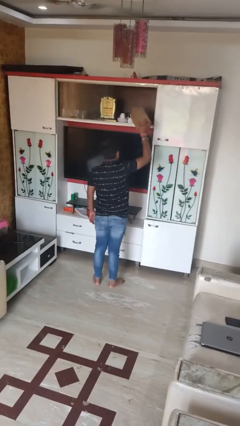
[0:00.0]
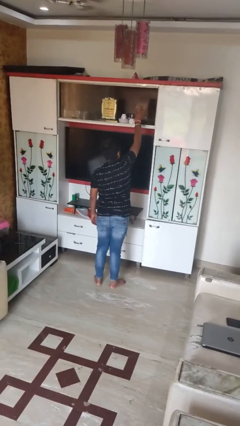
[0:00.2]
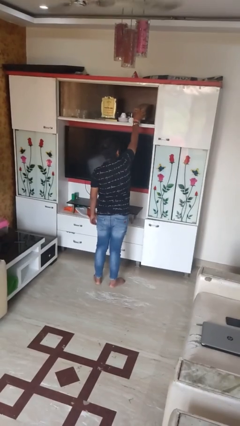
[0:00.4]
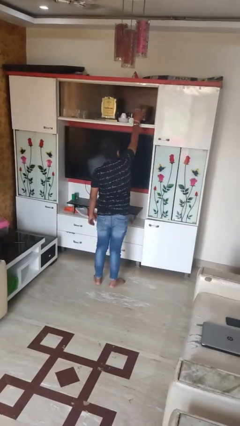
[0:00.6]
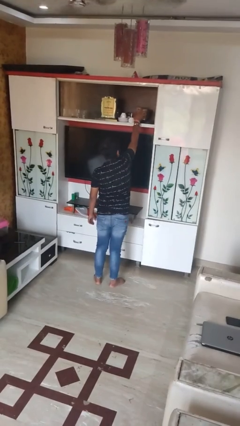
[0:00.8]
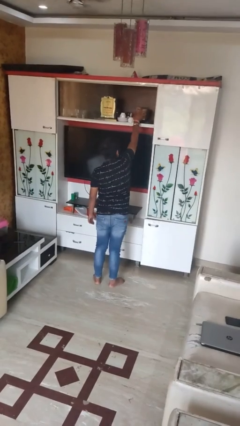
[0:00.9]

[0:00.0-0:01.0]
person puts down object on shelf

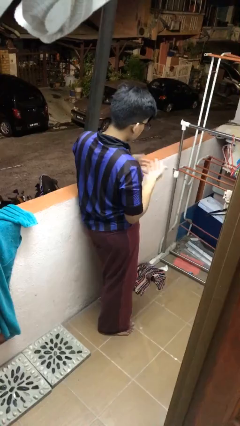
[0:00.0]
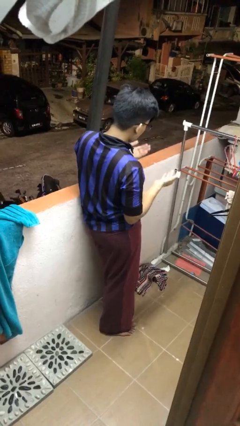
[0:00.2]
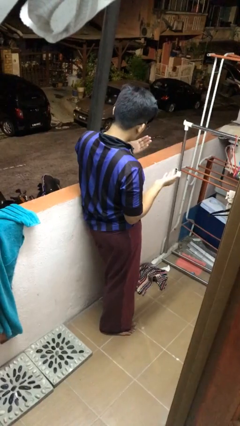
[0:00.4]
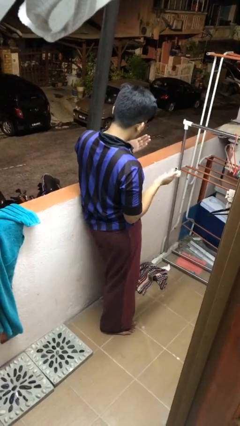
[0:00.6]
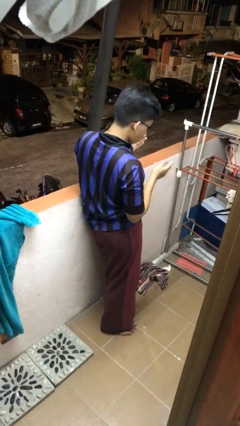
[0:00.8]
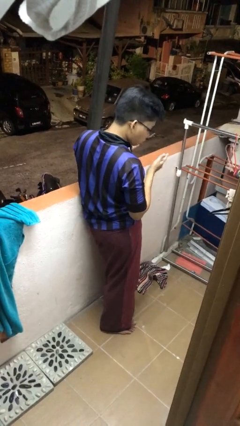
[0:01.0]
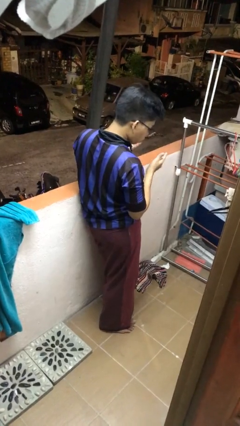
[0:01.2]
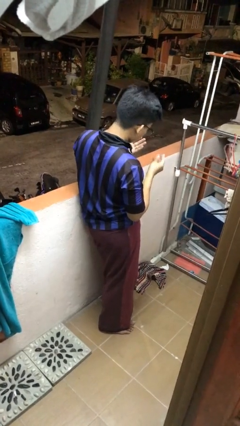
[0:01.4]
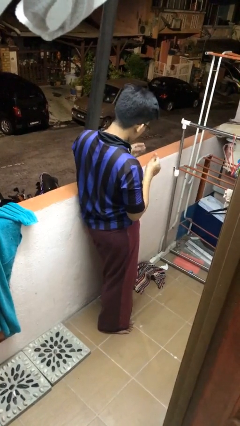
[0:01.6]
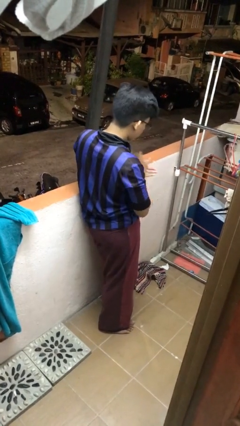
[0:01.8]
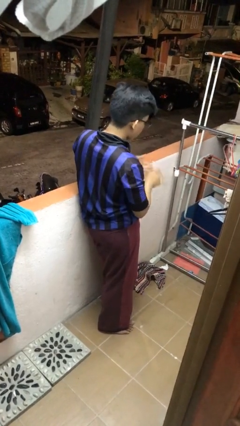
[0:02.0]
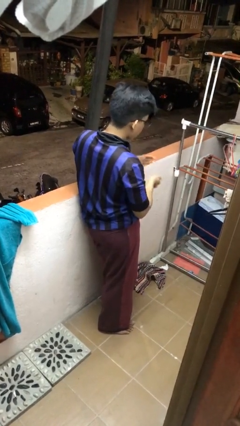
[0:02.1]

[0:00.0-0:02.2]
person blows into hands

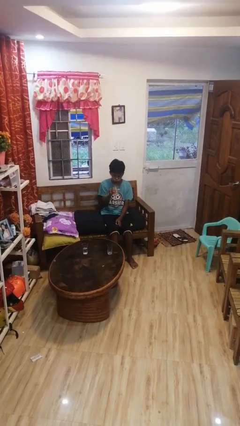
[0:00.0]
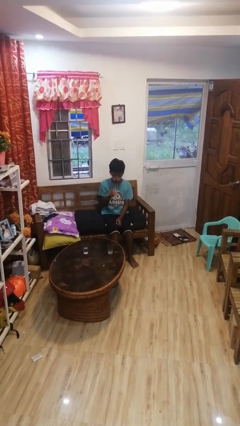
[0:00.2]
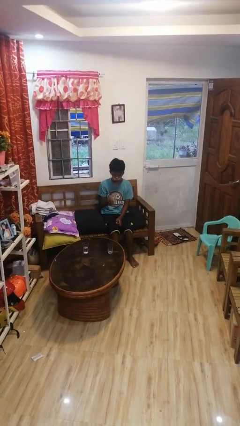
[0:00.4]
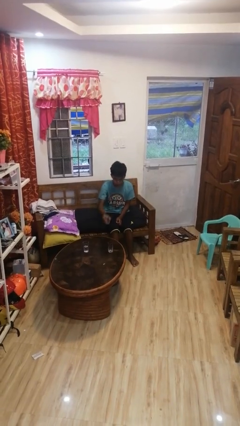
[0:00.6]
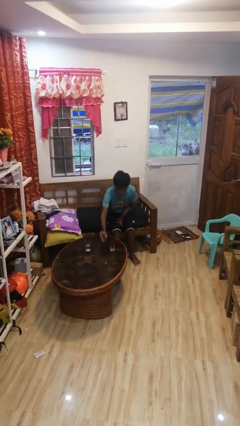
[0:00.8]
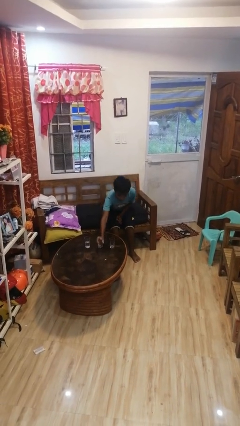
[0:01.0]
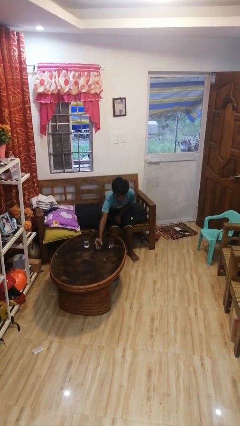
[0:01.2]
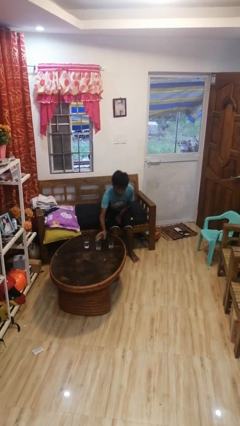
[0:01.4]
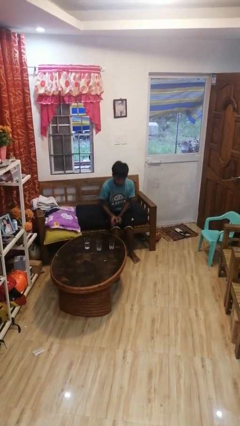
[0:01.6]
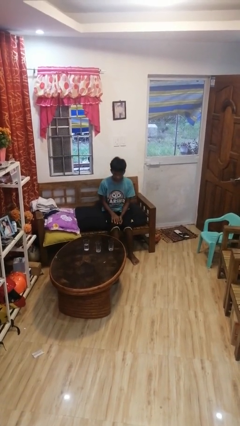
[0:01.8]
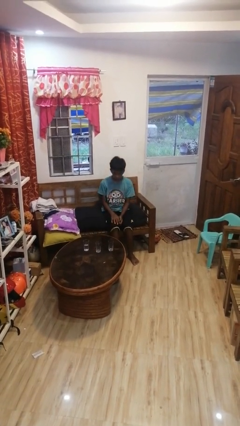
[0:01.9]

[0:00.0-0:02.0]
person puts down object on table

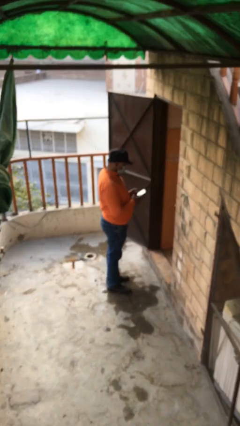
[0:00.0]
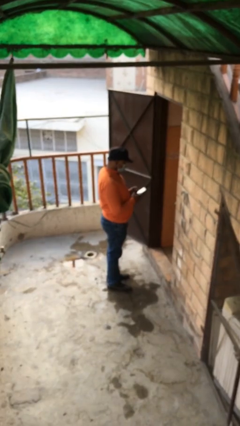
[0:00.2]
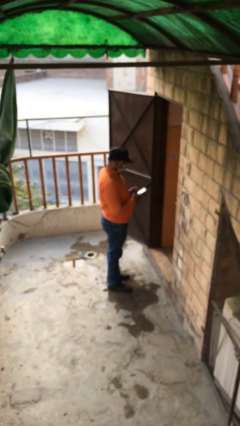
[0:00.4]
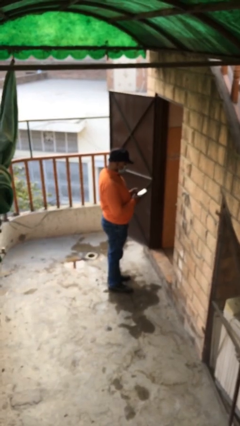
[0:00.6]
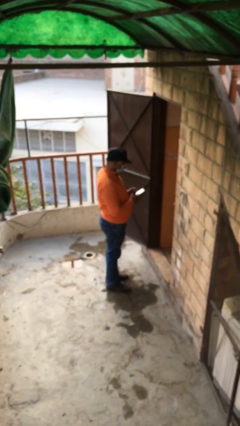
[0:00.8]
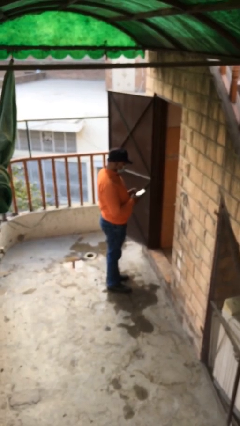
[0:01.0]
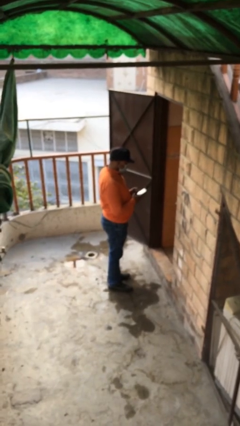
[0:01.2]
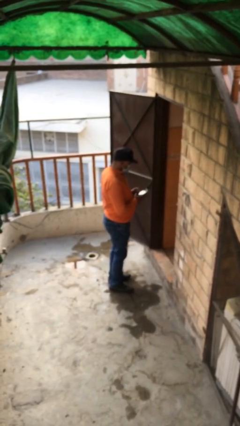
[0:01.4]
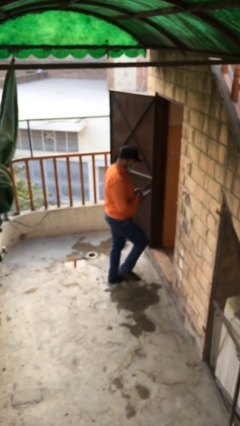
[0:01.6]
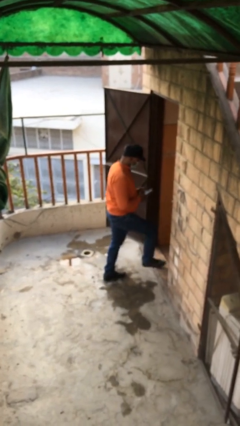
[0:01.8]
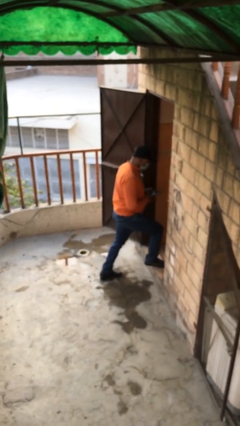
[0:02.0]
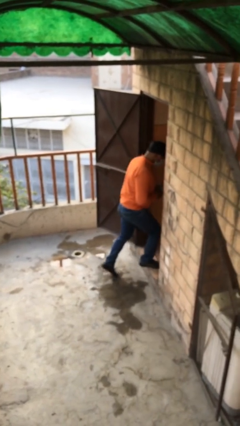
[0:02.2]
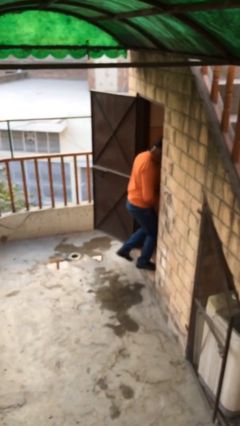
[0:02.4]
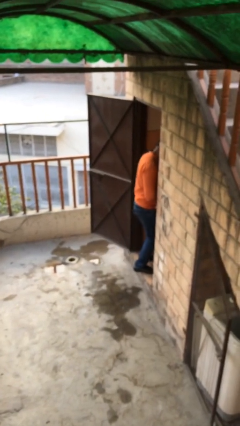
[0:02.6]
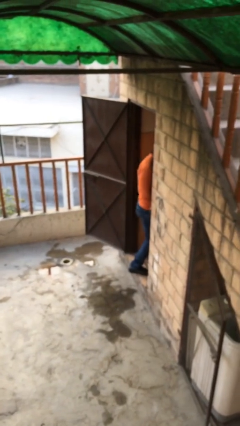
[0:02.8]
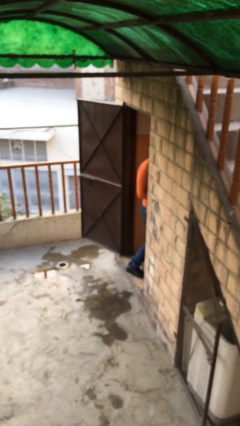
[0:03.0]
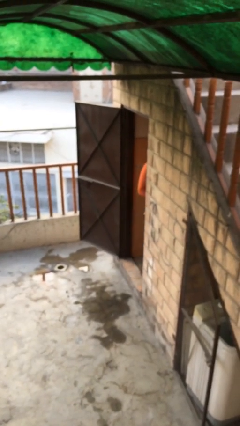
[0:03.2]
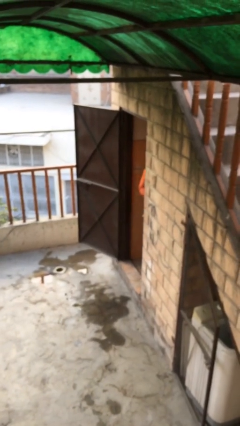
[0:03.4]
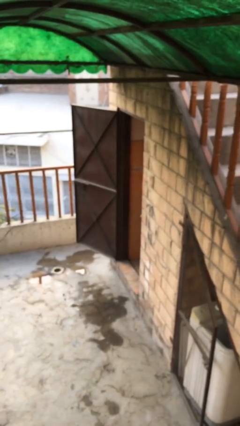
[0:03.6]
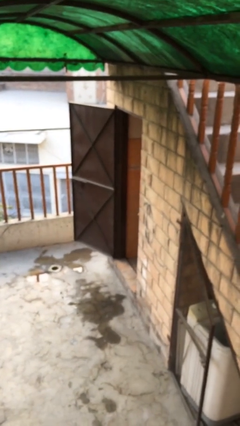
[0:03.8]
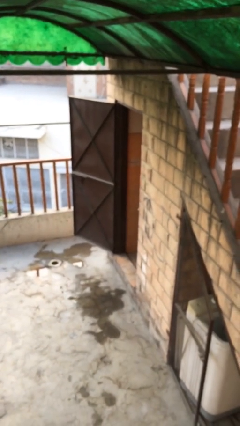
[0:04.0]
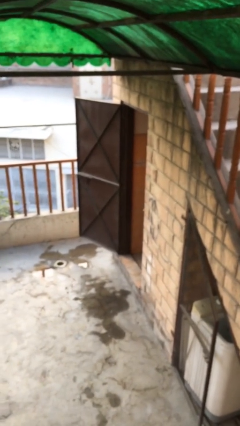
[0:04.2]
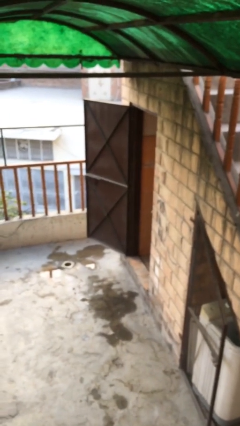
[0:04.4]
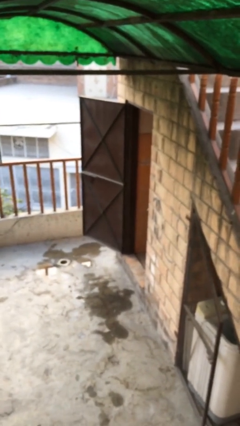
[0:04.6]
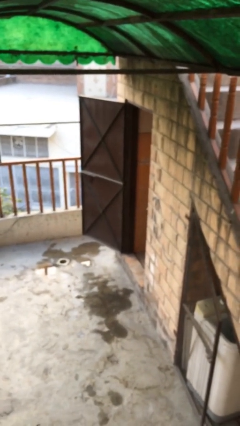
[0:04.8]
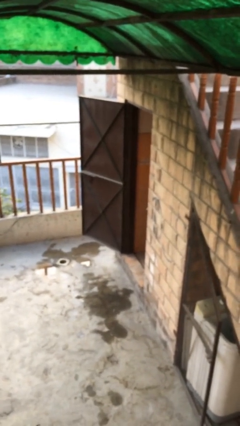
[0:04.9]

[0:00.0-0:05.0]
person enters scene through structure

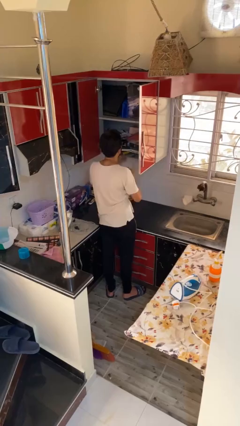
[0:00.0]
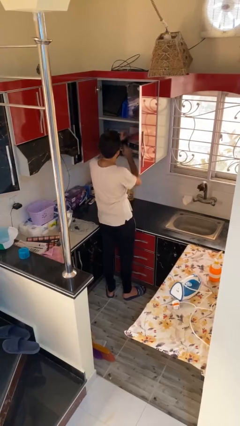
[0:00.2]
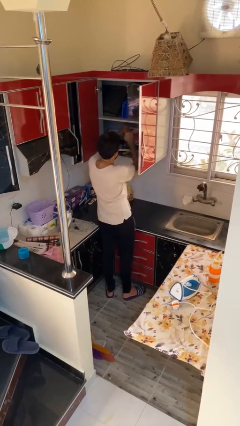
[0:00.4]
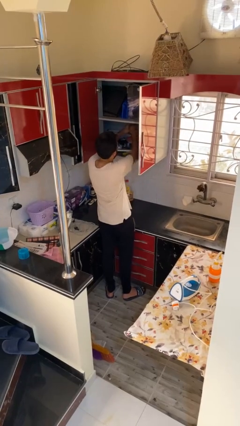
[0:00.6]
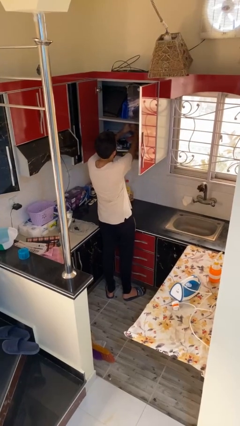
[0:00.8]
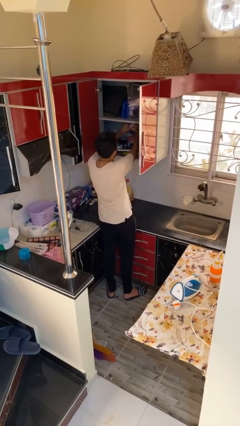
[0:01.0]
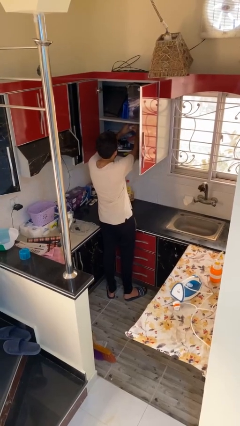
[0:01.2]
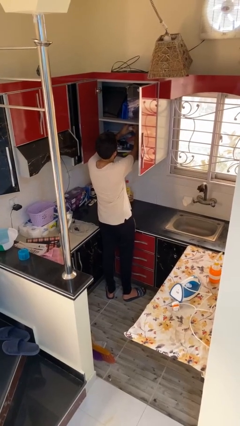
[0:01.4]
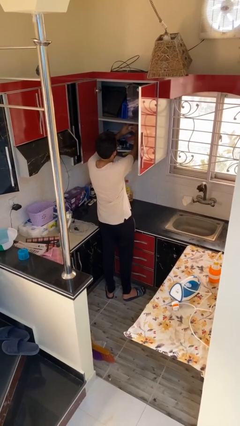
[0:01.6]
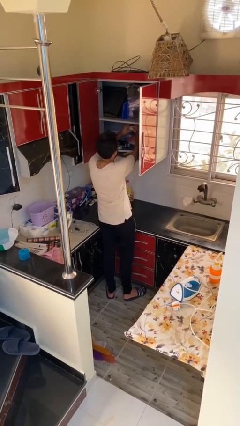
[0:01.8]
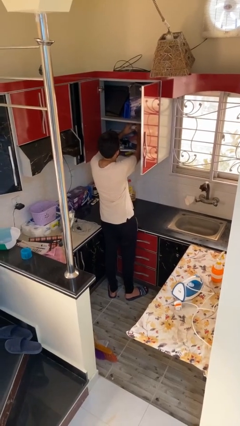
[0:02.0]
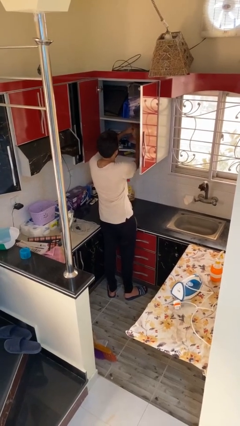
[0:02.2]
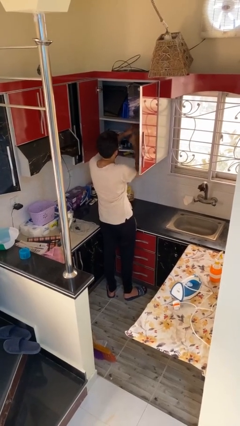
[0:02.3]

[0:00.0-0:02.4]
person searches in cabinet

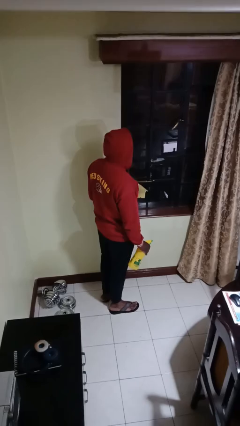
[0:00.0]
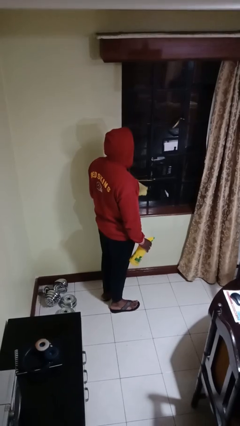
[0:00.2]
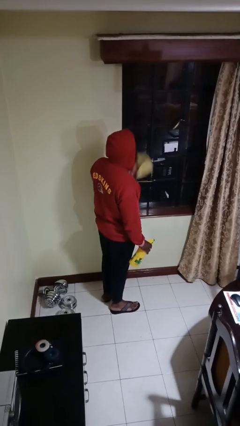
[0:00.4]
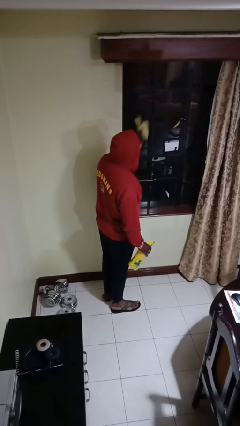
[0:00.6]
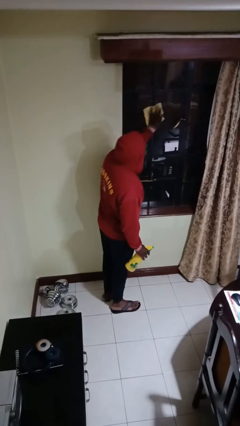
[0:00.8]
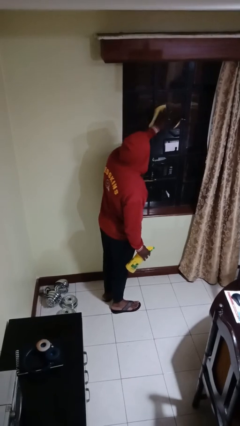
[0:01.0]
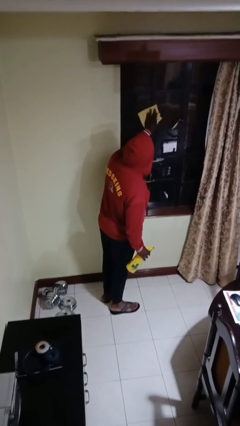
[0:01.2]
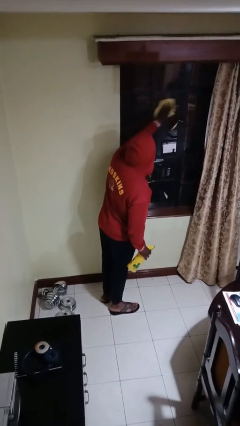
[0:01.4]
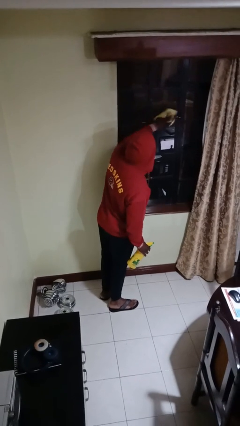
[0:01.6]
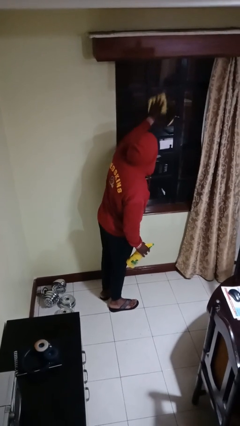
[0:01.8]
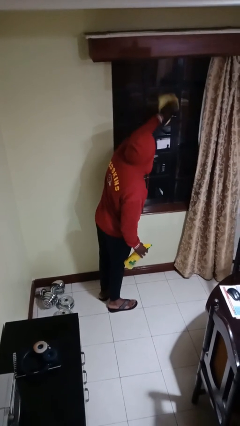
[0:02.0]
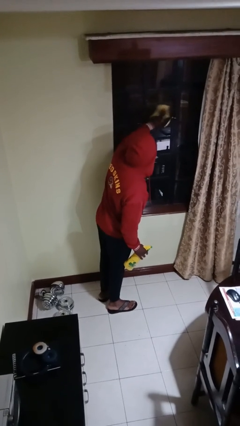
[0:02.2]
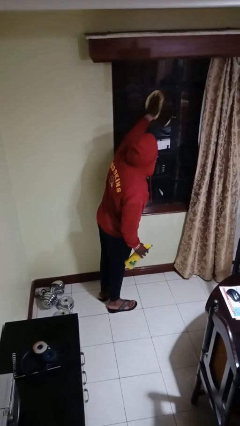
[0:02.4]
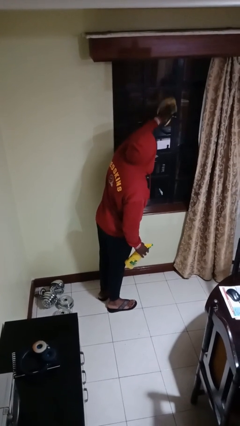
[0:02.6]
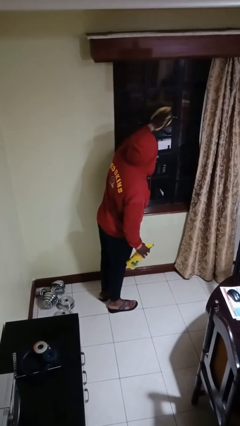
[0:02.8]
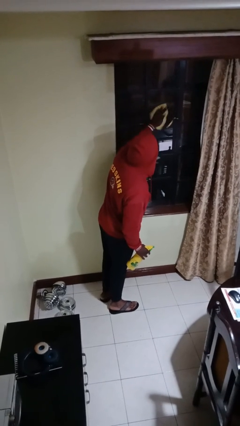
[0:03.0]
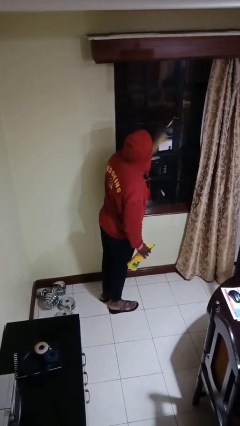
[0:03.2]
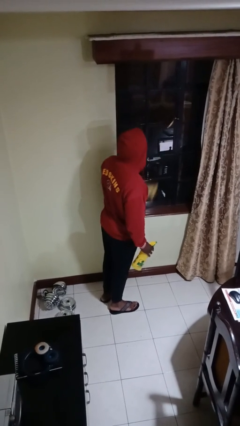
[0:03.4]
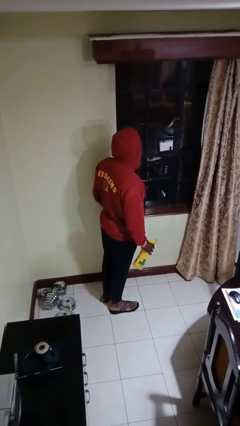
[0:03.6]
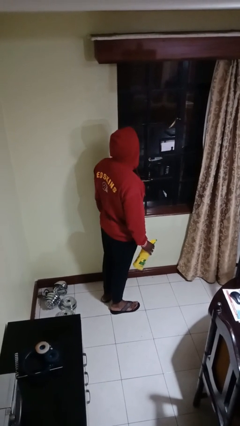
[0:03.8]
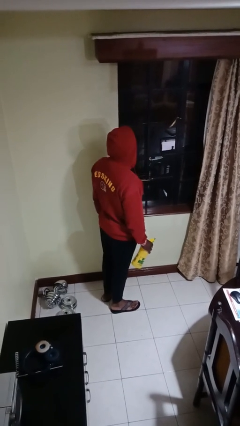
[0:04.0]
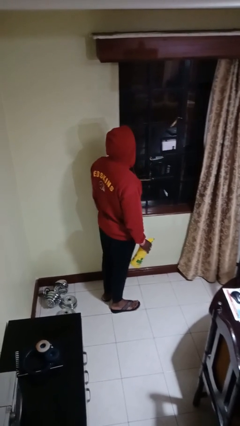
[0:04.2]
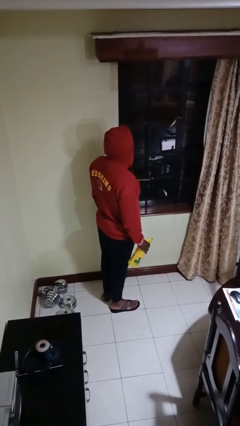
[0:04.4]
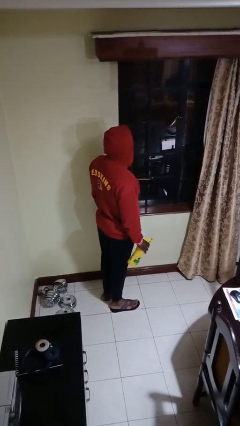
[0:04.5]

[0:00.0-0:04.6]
person washes window

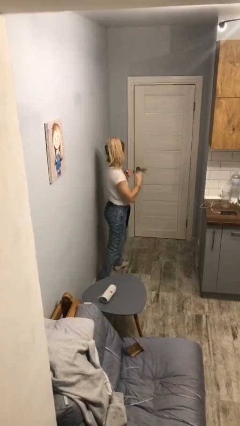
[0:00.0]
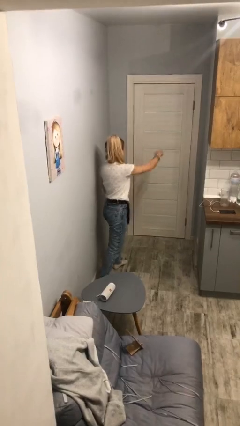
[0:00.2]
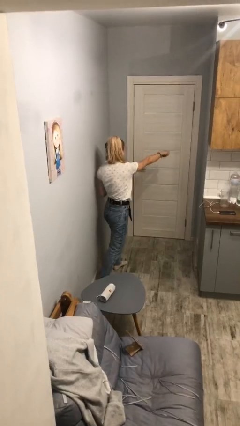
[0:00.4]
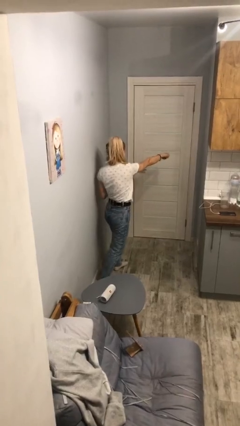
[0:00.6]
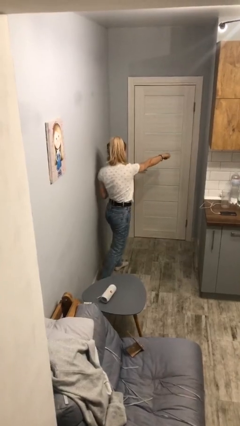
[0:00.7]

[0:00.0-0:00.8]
person karate chop
